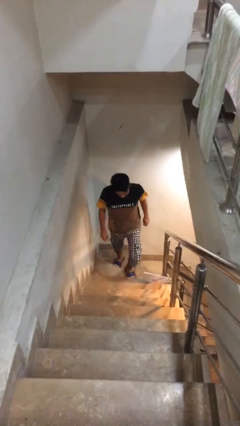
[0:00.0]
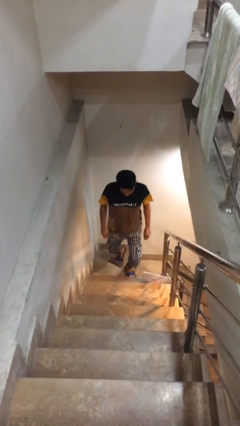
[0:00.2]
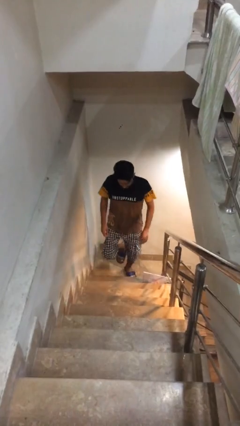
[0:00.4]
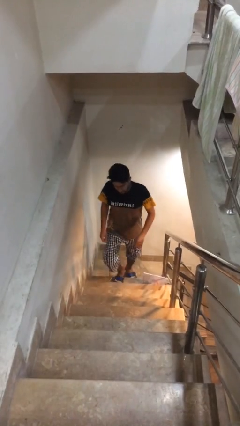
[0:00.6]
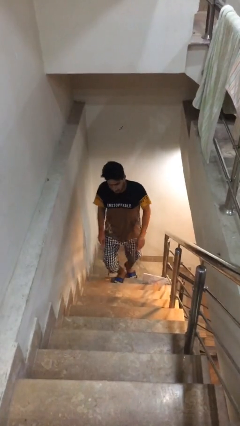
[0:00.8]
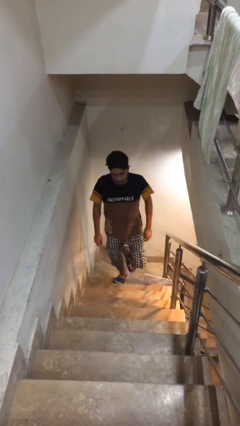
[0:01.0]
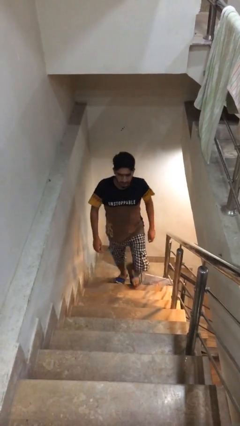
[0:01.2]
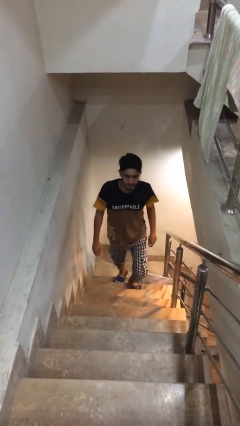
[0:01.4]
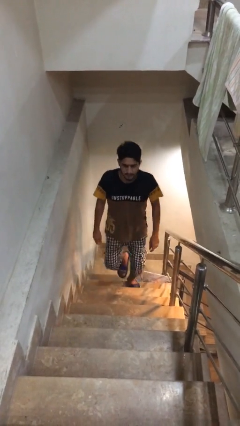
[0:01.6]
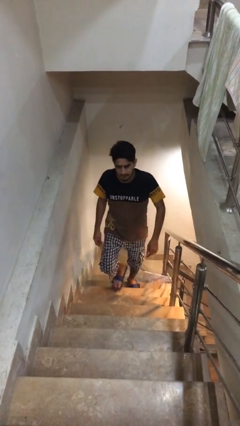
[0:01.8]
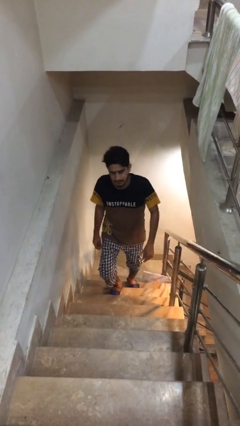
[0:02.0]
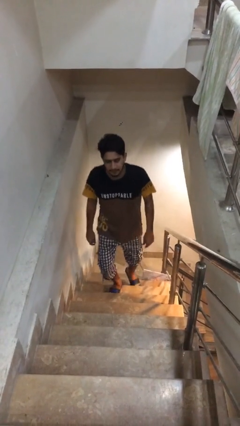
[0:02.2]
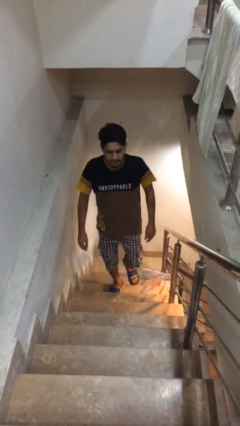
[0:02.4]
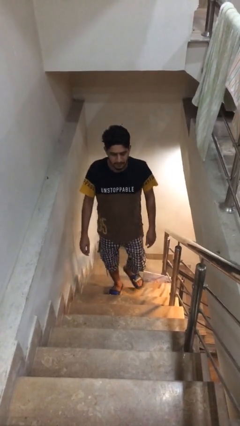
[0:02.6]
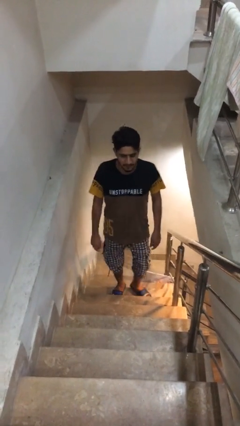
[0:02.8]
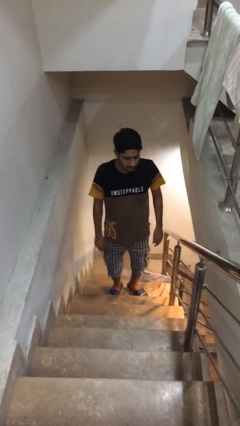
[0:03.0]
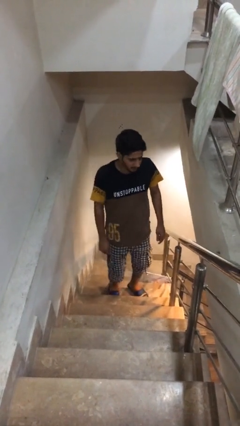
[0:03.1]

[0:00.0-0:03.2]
person climbs up stairs

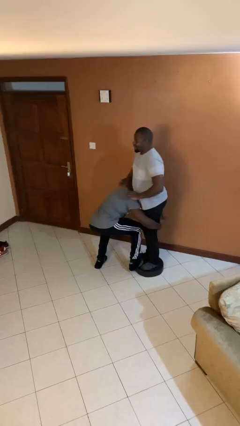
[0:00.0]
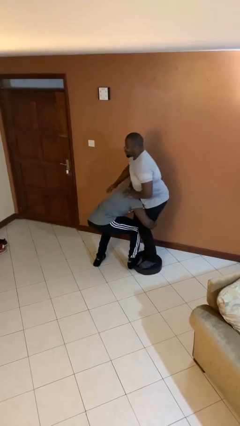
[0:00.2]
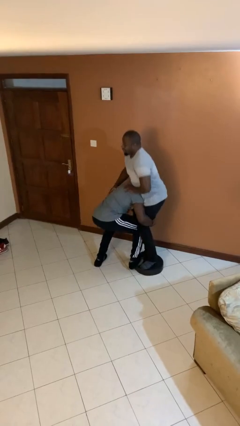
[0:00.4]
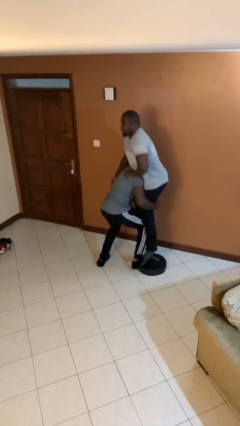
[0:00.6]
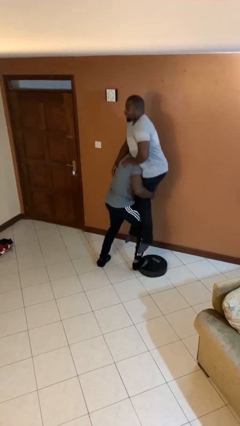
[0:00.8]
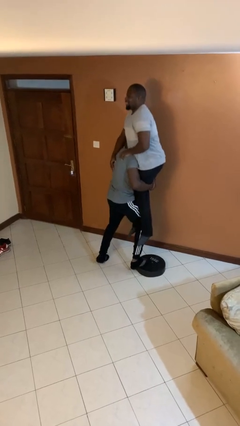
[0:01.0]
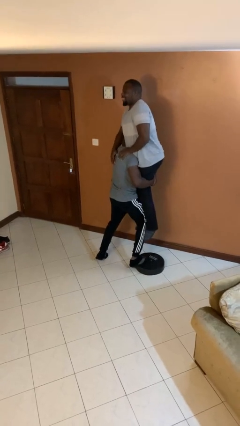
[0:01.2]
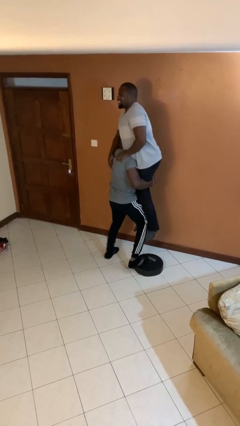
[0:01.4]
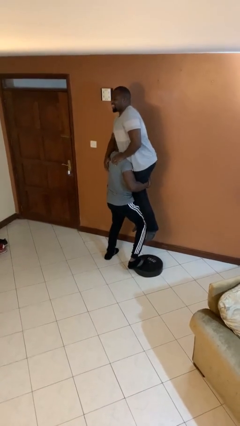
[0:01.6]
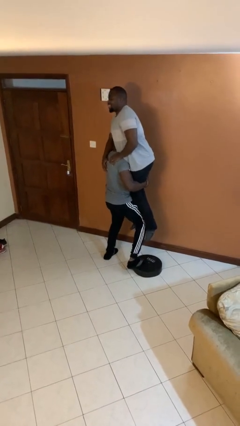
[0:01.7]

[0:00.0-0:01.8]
person picks up person

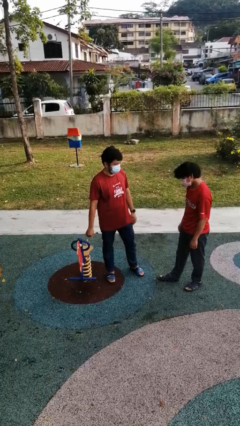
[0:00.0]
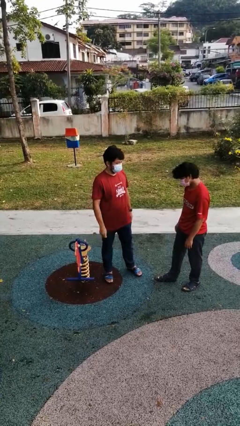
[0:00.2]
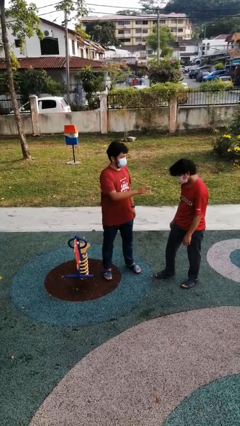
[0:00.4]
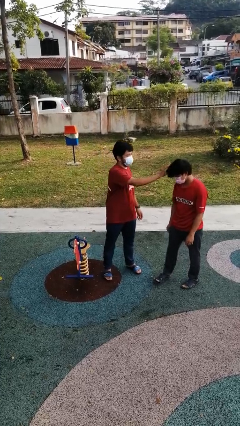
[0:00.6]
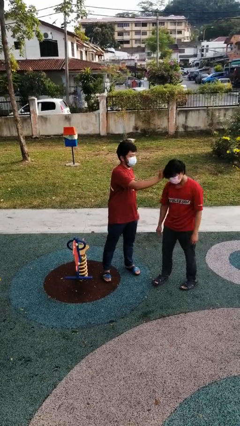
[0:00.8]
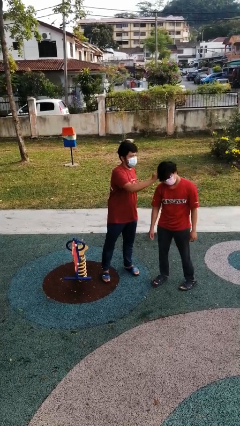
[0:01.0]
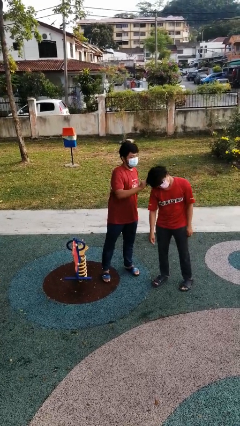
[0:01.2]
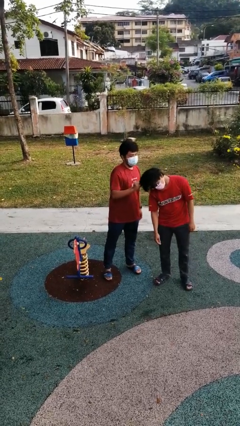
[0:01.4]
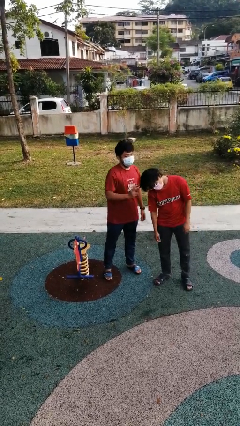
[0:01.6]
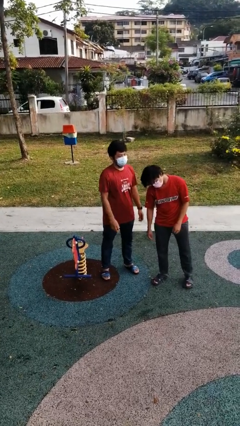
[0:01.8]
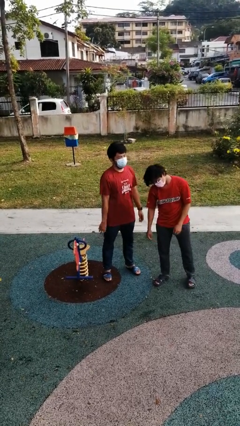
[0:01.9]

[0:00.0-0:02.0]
person grabs person by hair

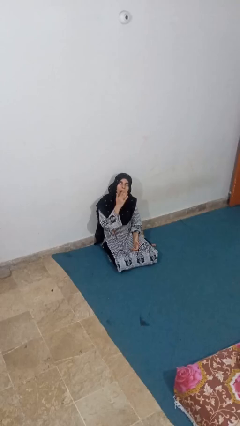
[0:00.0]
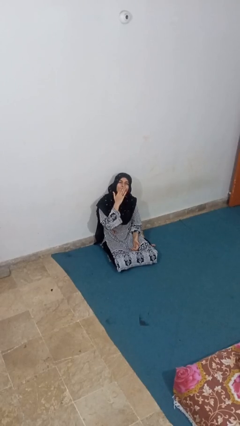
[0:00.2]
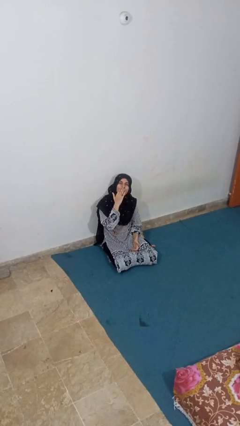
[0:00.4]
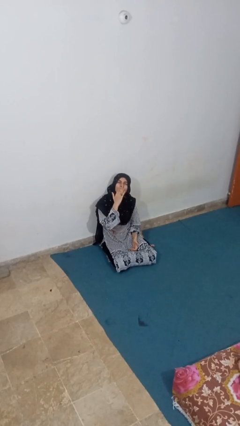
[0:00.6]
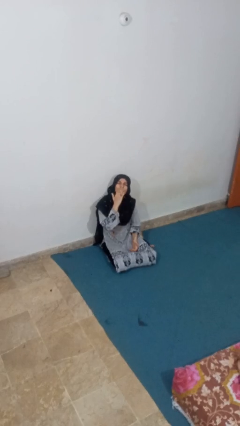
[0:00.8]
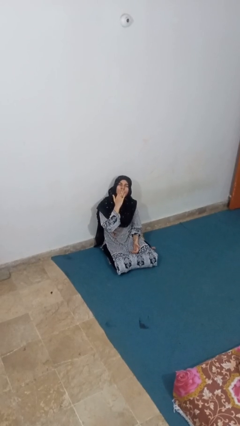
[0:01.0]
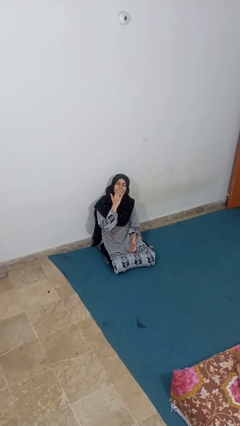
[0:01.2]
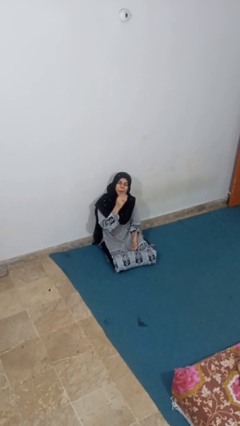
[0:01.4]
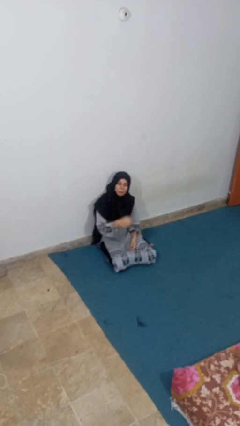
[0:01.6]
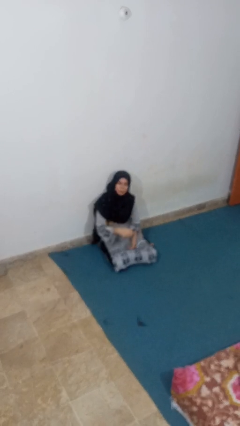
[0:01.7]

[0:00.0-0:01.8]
person yawns

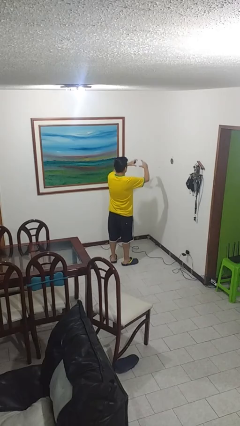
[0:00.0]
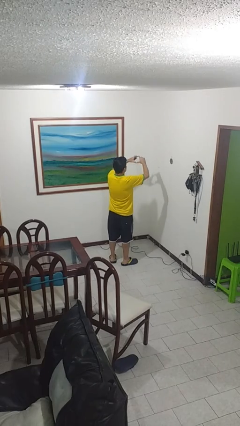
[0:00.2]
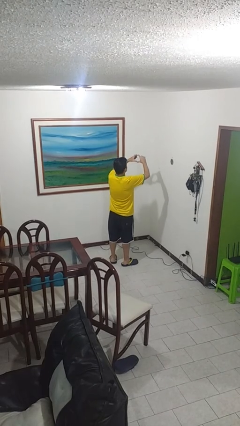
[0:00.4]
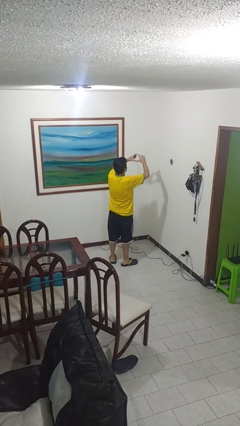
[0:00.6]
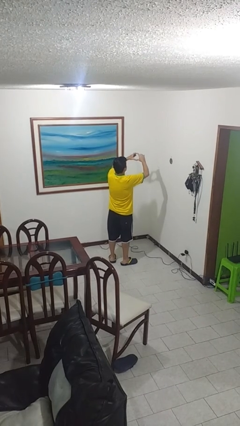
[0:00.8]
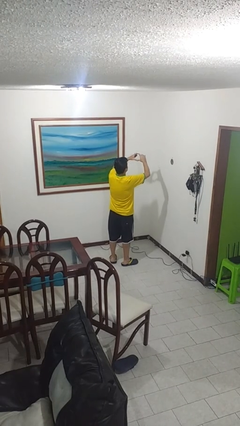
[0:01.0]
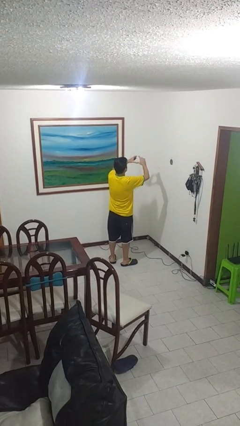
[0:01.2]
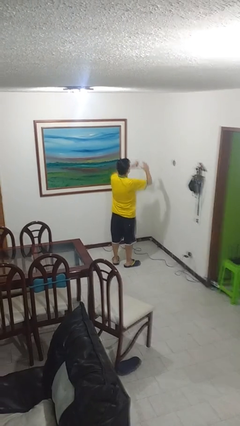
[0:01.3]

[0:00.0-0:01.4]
person gestures heart

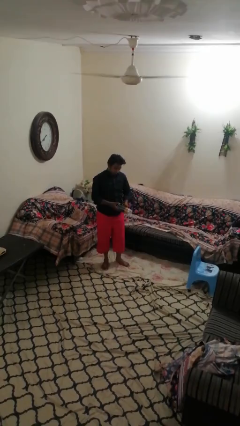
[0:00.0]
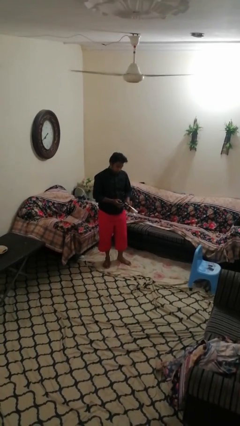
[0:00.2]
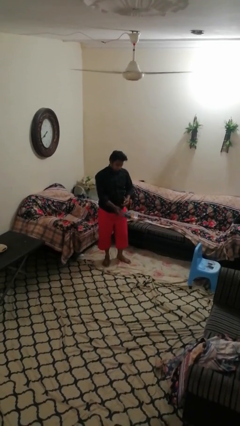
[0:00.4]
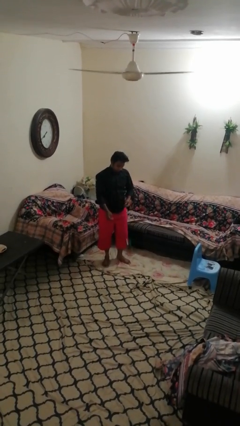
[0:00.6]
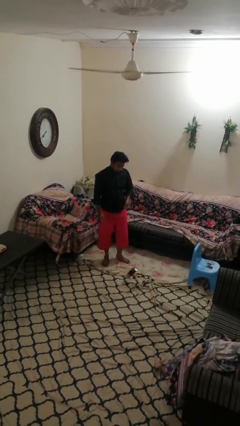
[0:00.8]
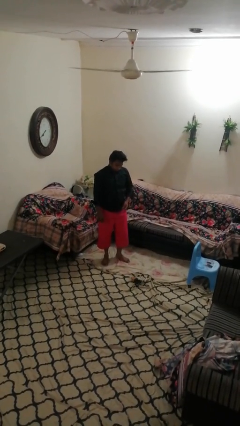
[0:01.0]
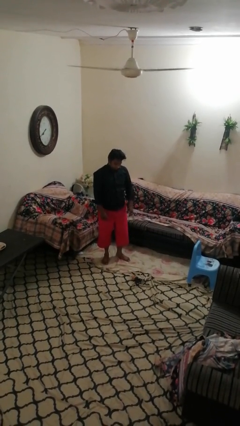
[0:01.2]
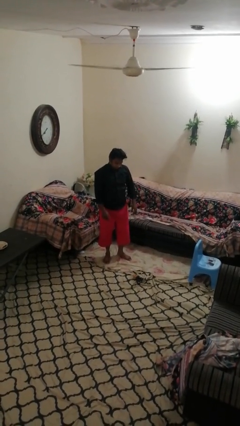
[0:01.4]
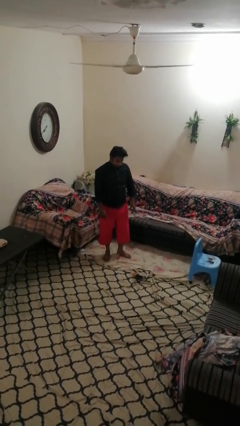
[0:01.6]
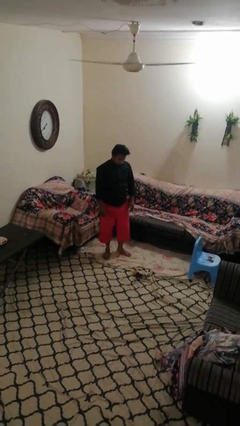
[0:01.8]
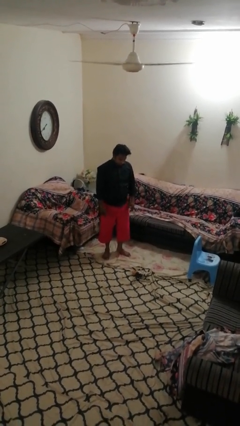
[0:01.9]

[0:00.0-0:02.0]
person drops object

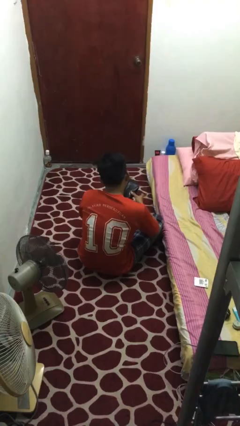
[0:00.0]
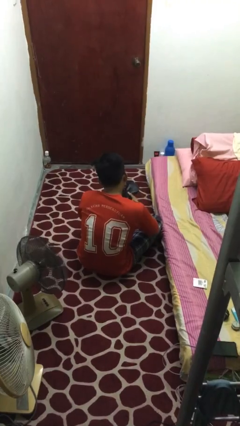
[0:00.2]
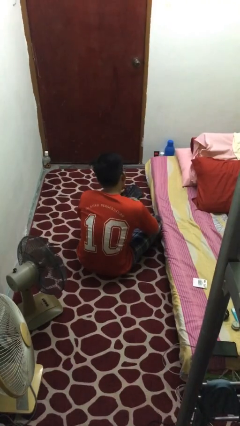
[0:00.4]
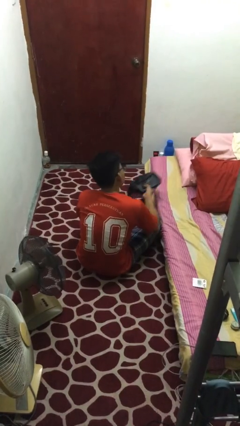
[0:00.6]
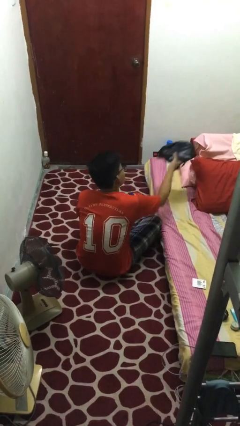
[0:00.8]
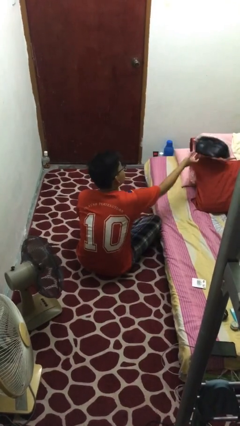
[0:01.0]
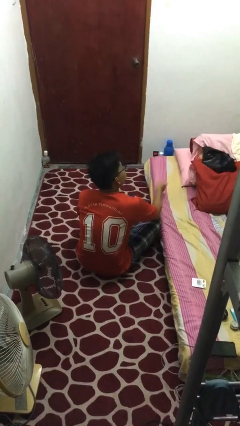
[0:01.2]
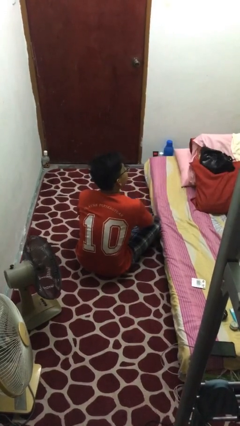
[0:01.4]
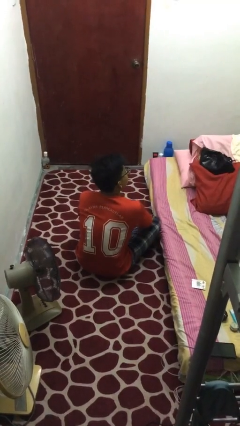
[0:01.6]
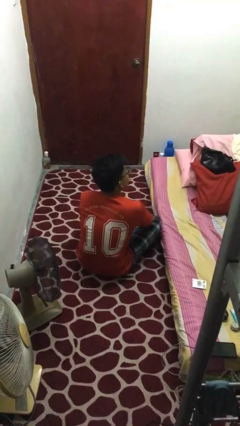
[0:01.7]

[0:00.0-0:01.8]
person puts down object on bed

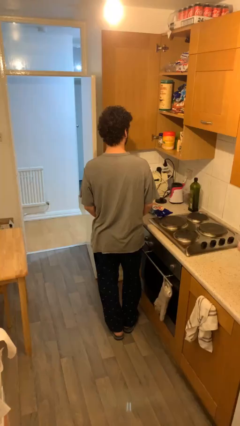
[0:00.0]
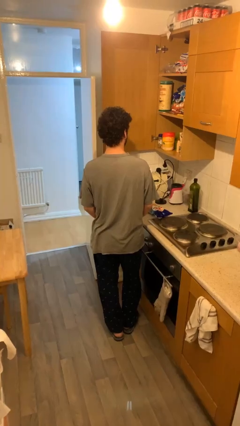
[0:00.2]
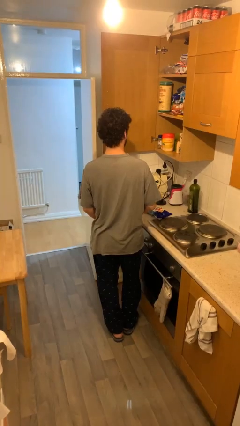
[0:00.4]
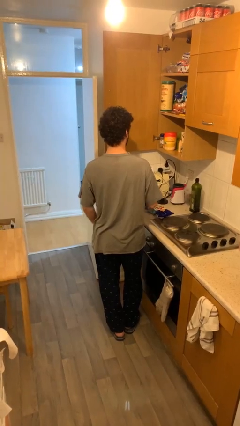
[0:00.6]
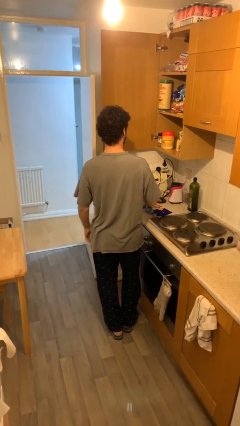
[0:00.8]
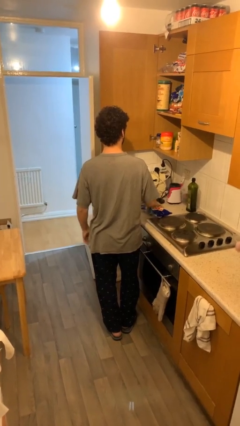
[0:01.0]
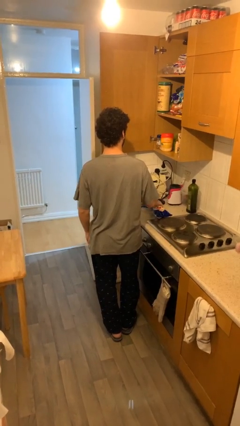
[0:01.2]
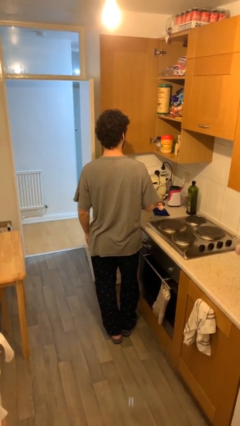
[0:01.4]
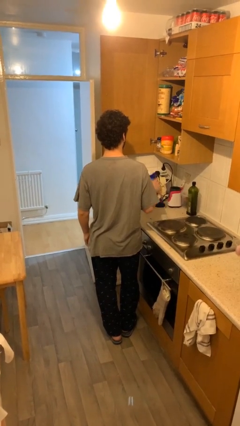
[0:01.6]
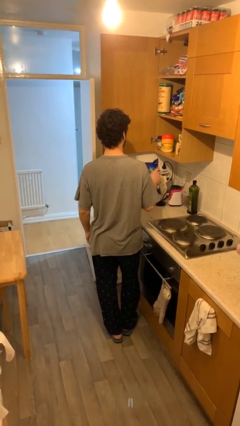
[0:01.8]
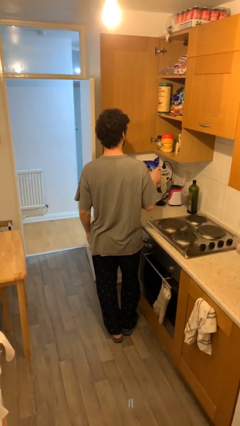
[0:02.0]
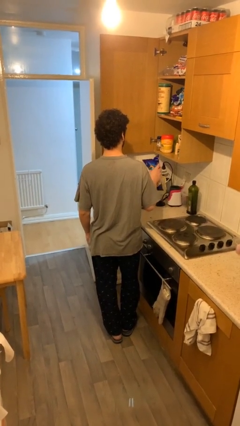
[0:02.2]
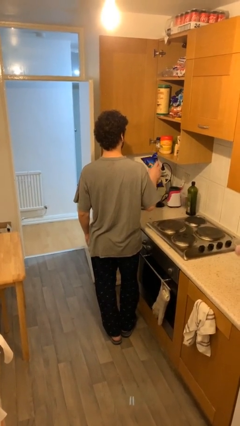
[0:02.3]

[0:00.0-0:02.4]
person picks up object from table

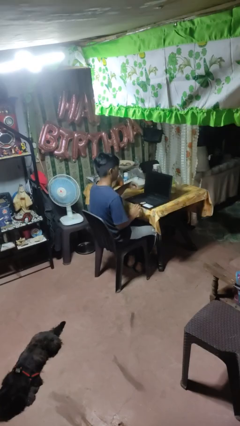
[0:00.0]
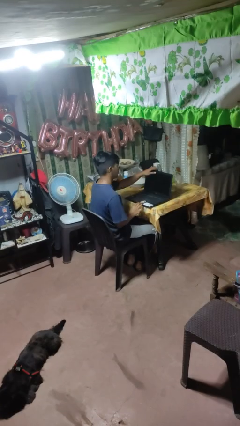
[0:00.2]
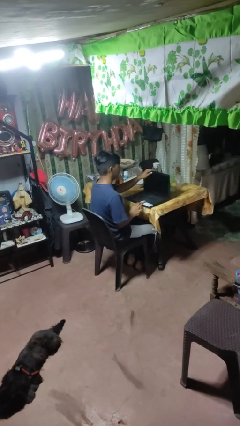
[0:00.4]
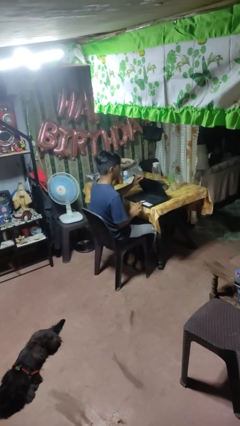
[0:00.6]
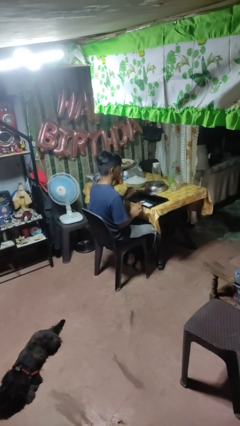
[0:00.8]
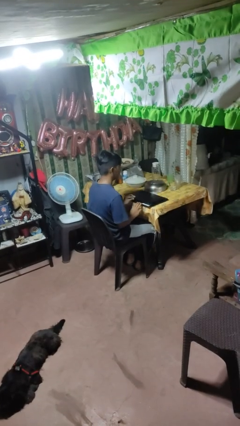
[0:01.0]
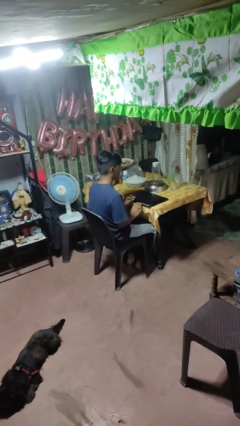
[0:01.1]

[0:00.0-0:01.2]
person closes laptop
